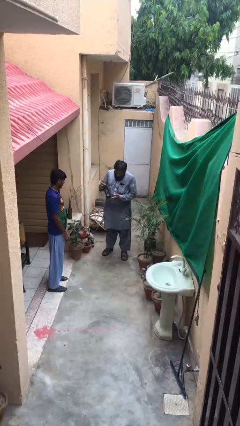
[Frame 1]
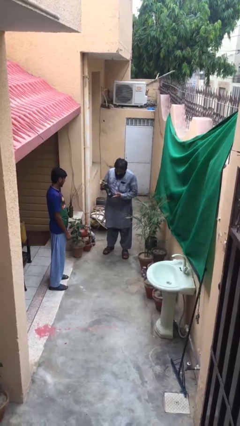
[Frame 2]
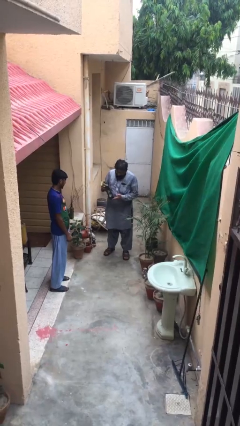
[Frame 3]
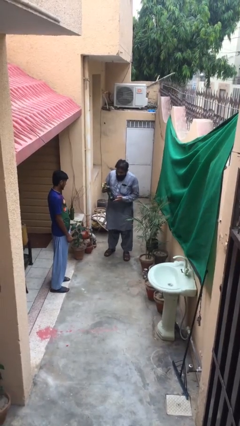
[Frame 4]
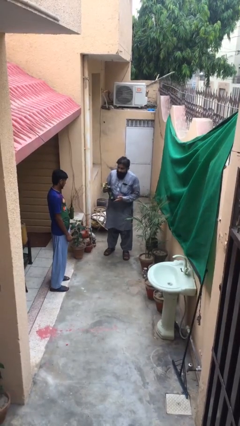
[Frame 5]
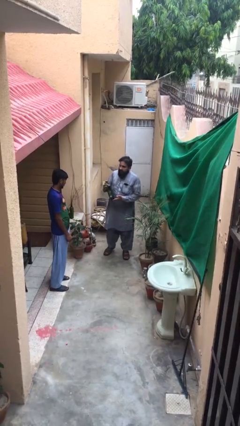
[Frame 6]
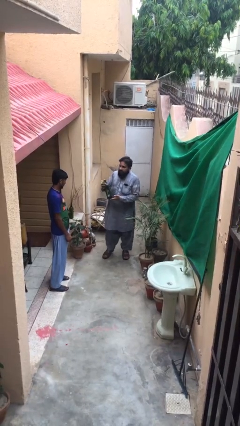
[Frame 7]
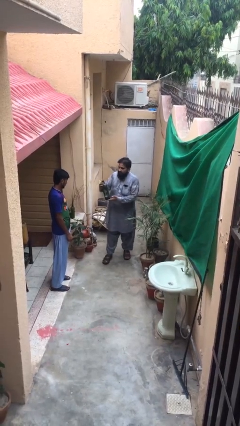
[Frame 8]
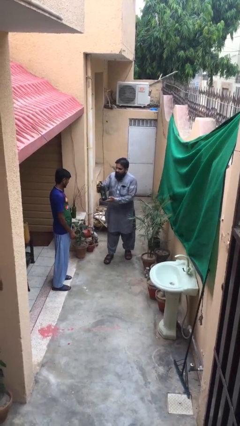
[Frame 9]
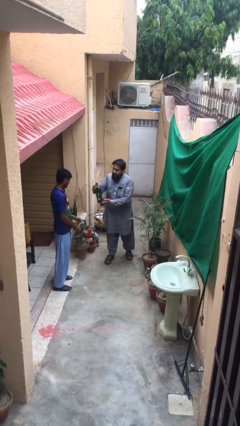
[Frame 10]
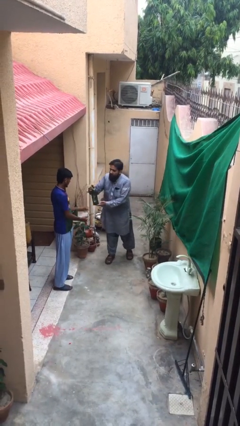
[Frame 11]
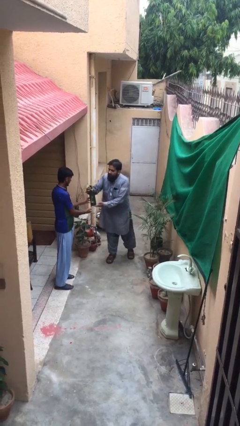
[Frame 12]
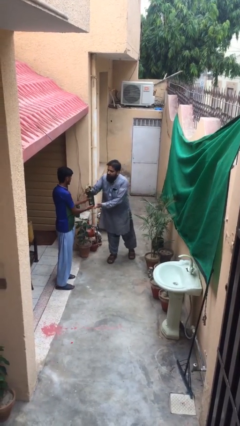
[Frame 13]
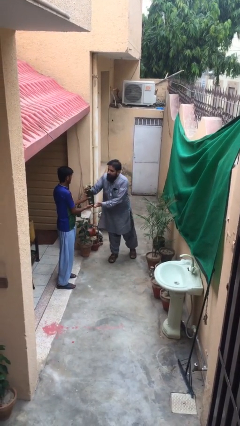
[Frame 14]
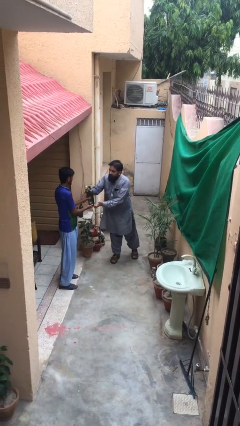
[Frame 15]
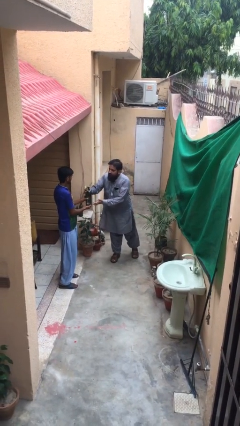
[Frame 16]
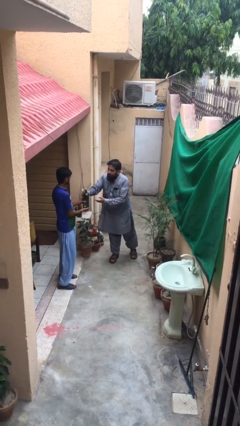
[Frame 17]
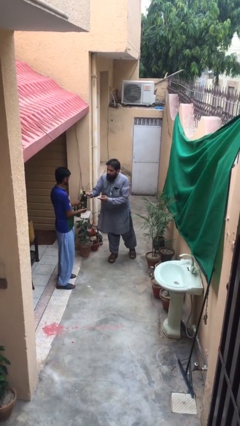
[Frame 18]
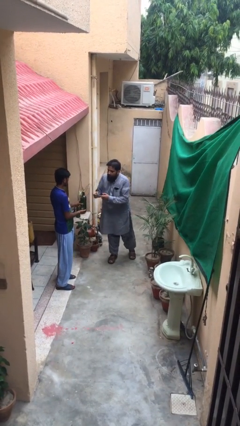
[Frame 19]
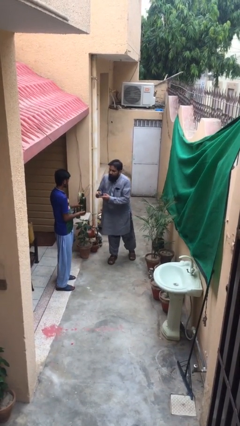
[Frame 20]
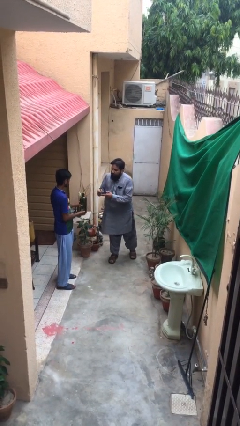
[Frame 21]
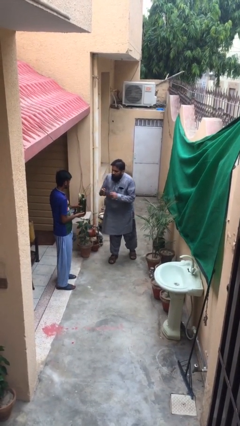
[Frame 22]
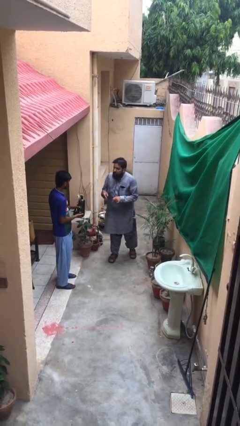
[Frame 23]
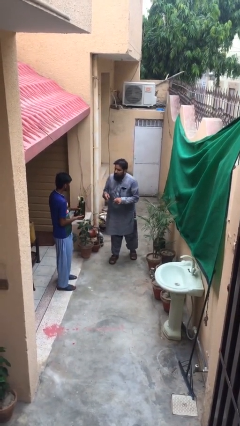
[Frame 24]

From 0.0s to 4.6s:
person transfers object to person

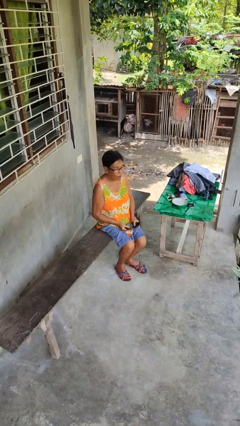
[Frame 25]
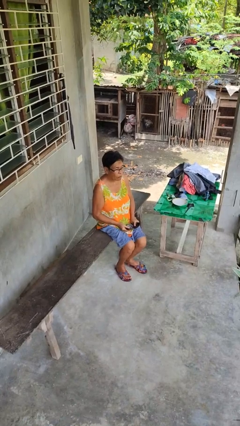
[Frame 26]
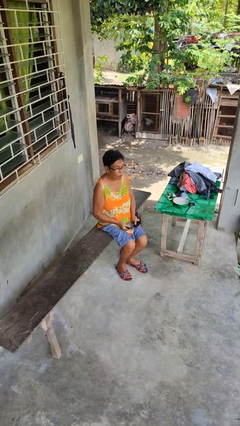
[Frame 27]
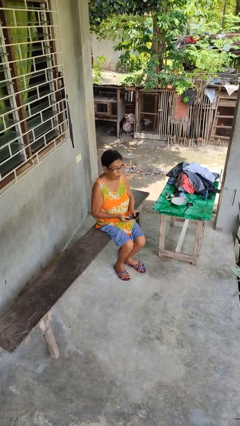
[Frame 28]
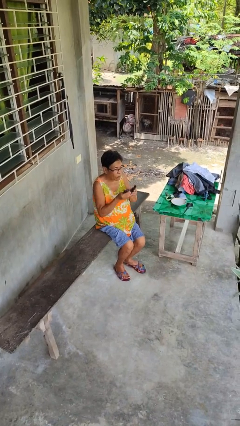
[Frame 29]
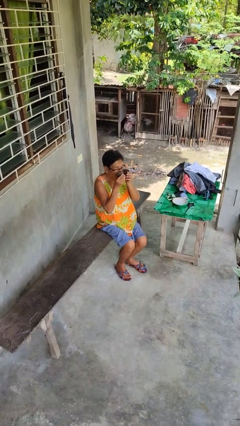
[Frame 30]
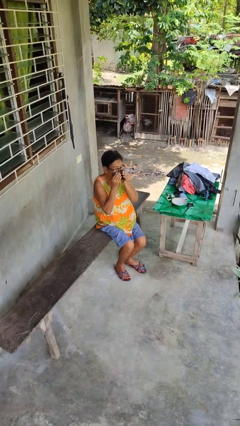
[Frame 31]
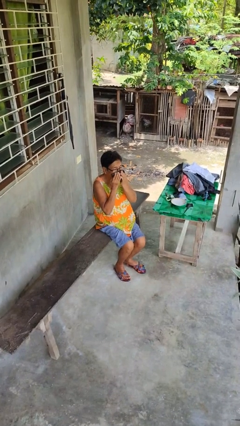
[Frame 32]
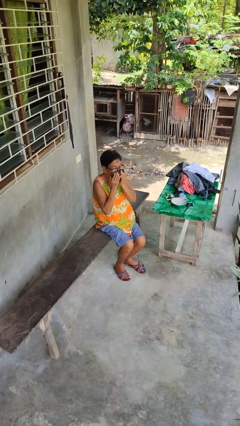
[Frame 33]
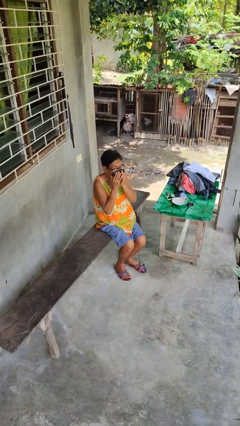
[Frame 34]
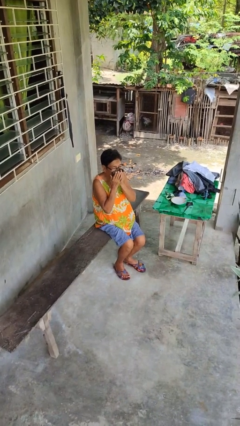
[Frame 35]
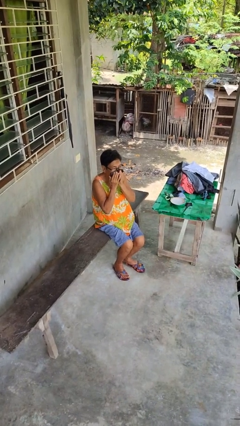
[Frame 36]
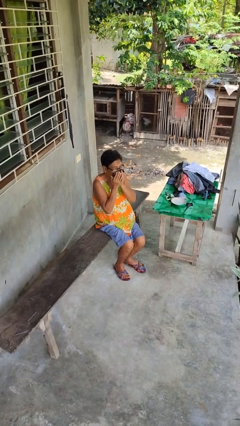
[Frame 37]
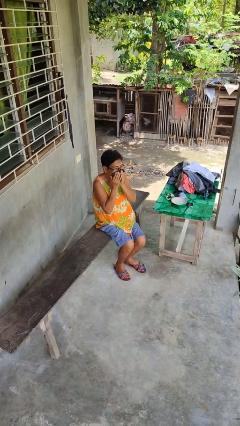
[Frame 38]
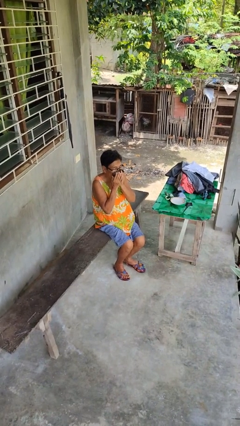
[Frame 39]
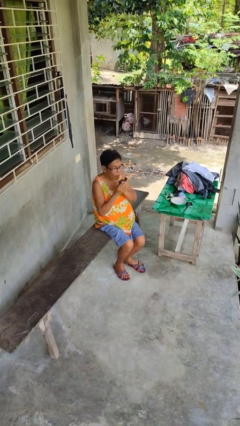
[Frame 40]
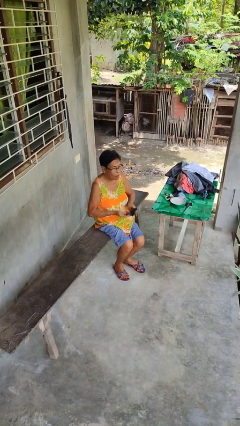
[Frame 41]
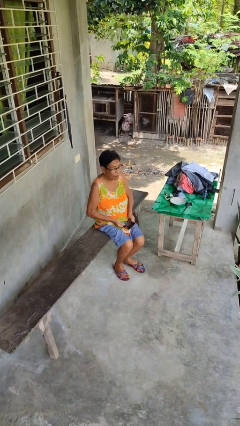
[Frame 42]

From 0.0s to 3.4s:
person blows nose

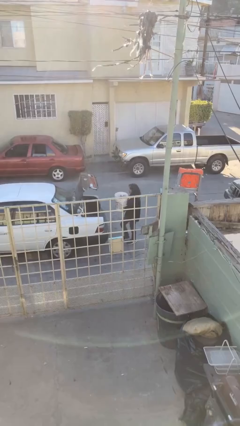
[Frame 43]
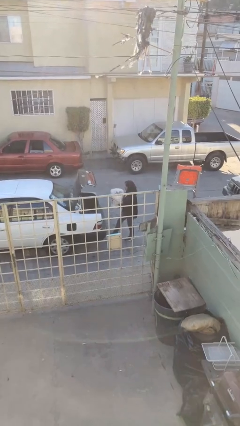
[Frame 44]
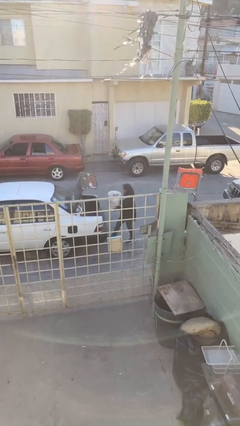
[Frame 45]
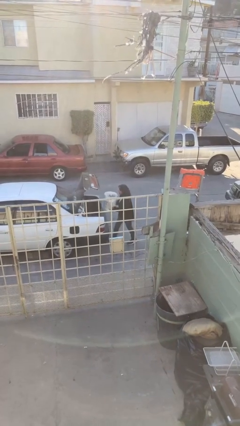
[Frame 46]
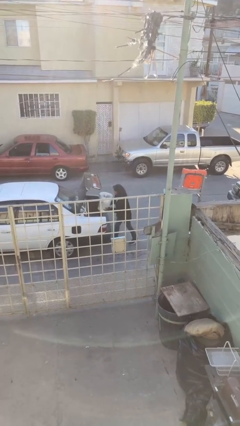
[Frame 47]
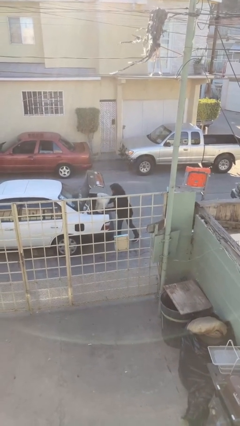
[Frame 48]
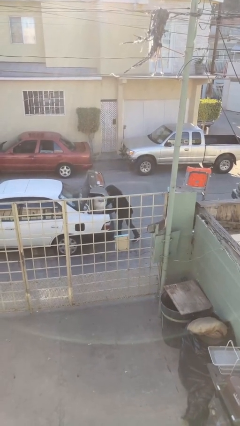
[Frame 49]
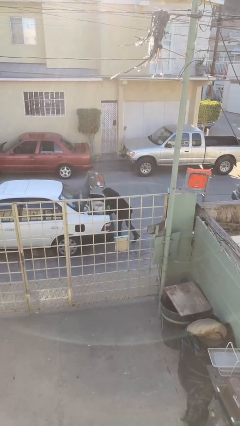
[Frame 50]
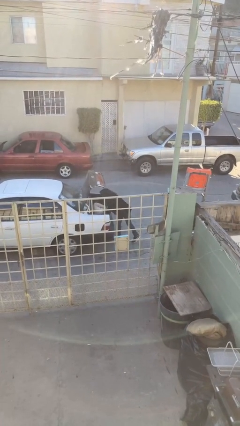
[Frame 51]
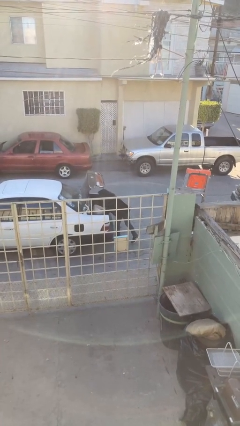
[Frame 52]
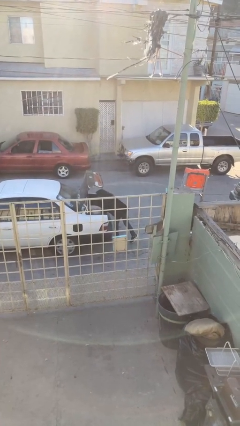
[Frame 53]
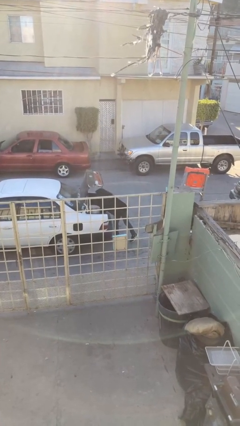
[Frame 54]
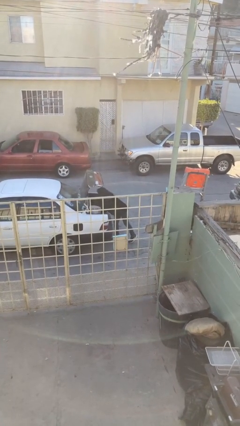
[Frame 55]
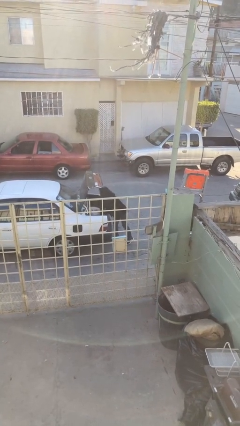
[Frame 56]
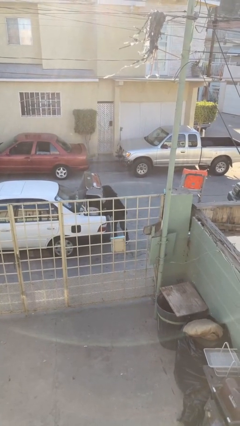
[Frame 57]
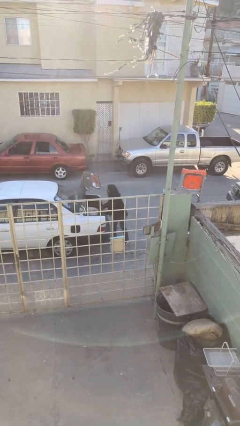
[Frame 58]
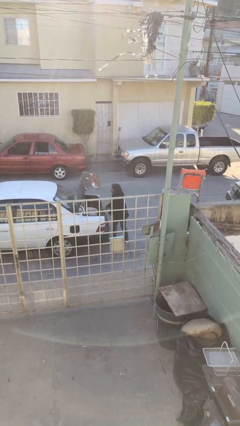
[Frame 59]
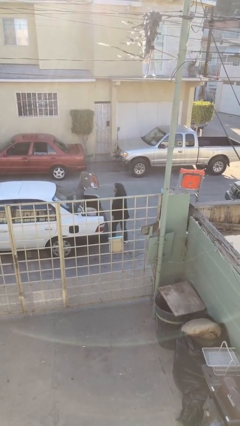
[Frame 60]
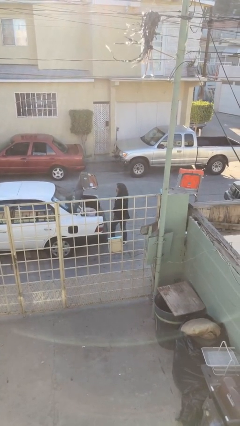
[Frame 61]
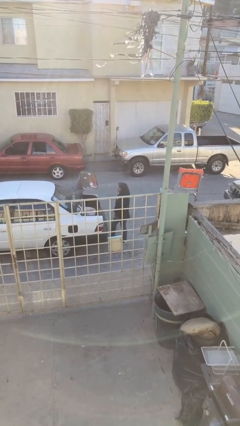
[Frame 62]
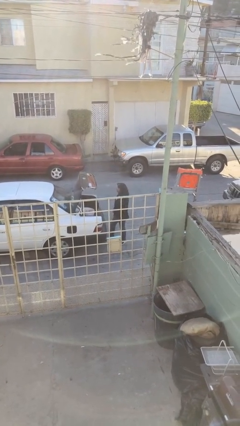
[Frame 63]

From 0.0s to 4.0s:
person loads car

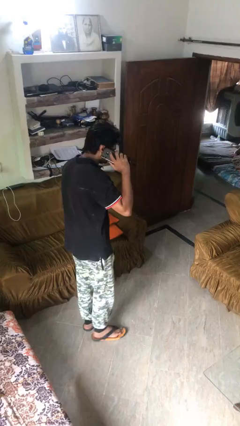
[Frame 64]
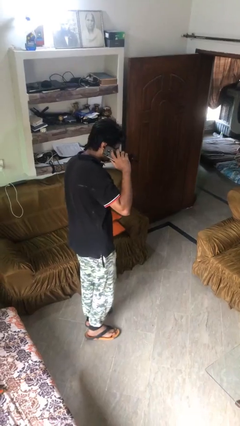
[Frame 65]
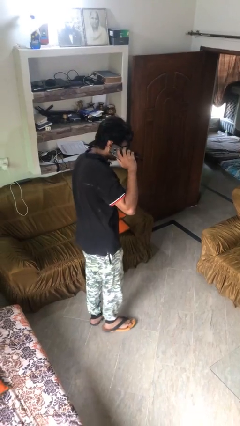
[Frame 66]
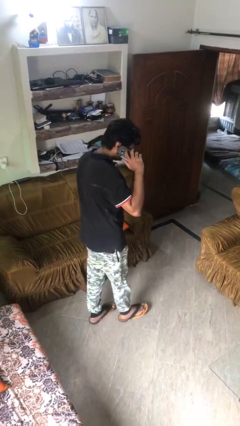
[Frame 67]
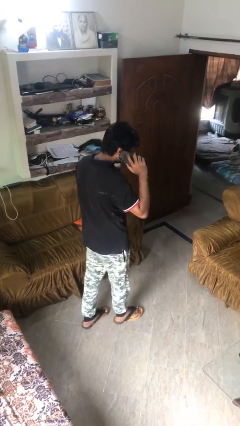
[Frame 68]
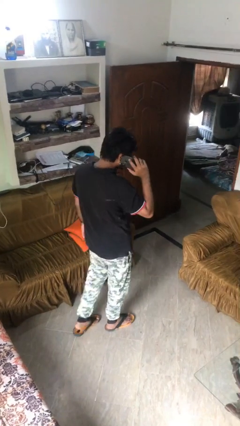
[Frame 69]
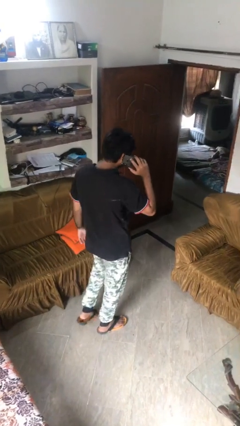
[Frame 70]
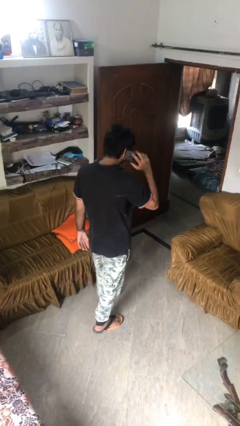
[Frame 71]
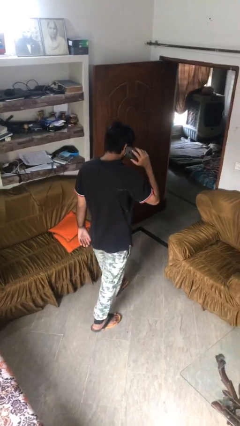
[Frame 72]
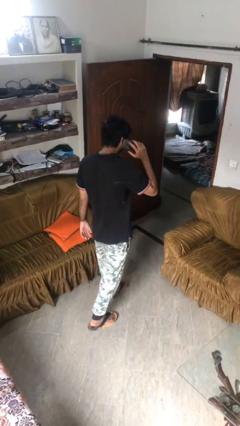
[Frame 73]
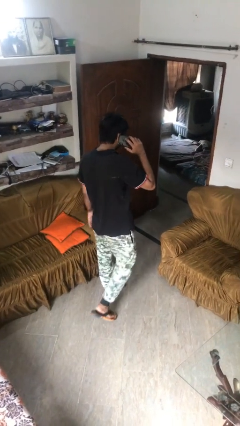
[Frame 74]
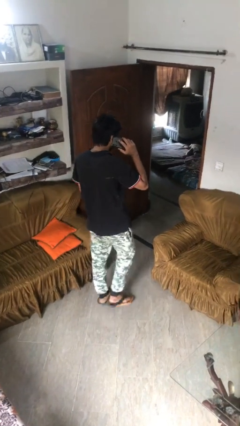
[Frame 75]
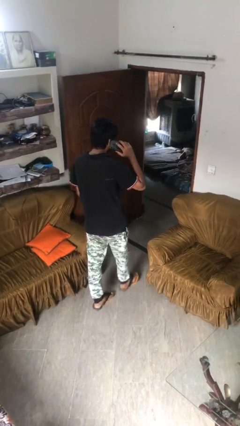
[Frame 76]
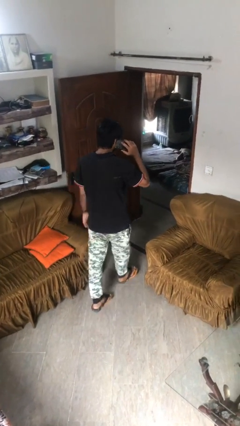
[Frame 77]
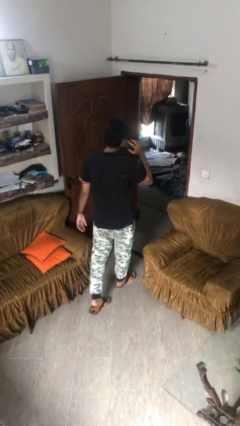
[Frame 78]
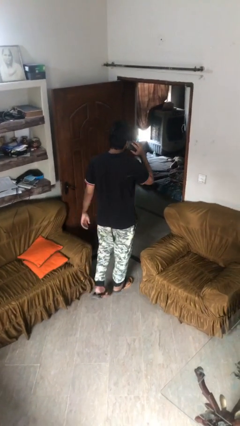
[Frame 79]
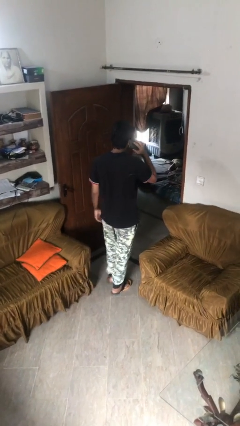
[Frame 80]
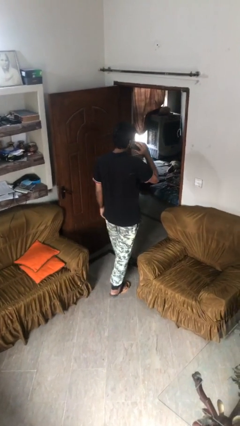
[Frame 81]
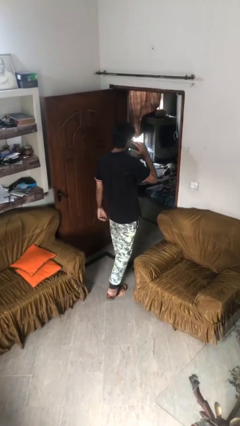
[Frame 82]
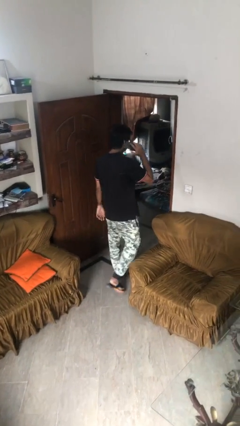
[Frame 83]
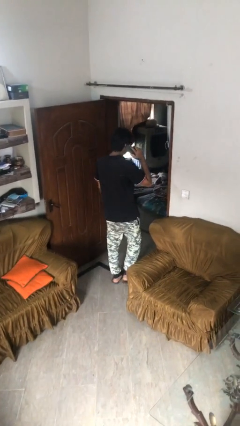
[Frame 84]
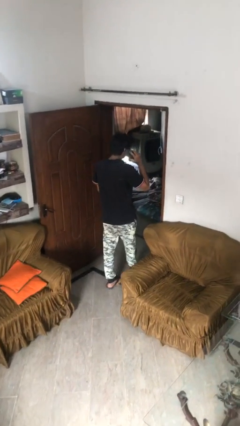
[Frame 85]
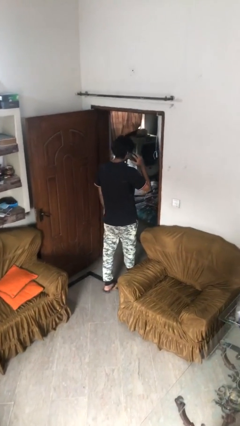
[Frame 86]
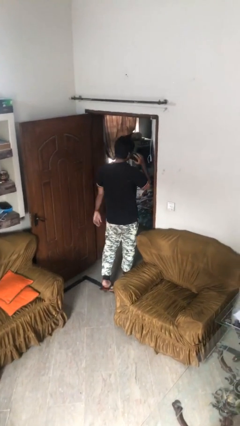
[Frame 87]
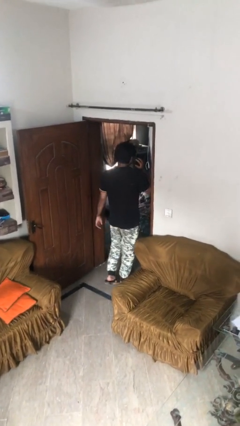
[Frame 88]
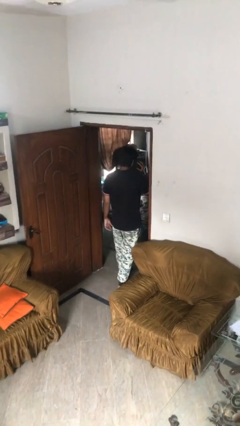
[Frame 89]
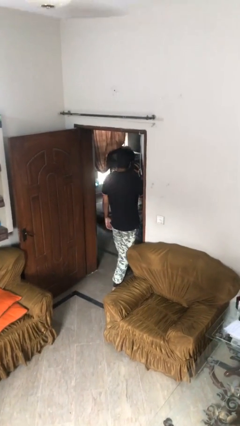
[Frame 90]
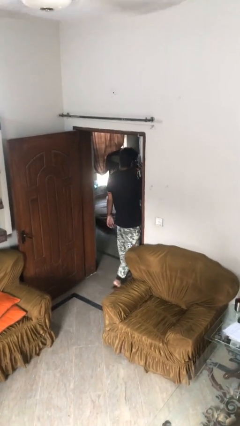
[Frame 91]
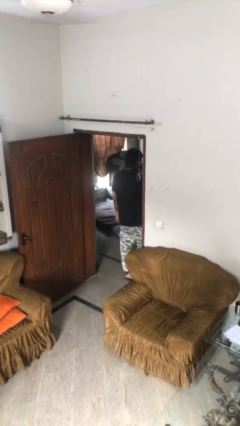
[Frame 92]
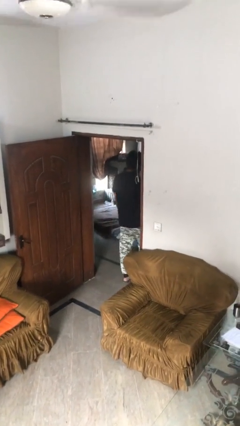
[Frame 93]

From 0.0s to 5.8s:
person exits scene through structure
